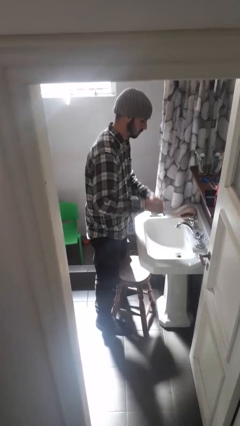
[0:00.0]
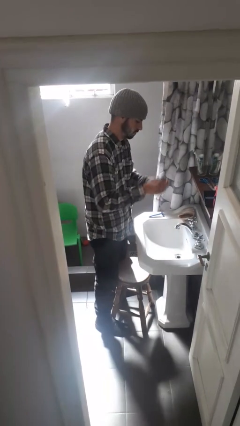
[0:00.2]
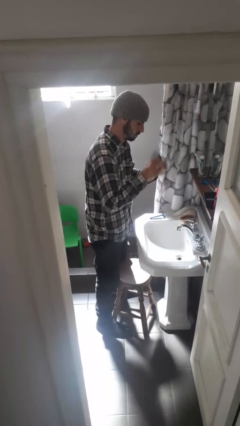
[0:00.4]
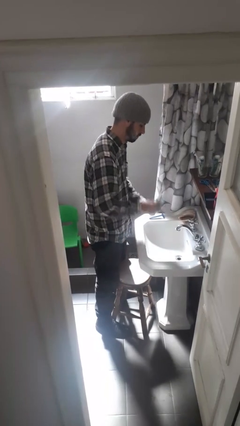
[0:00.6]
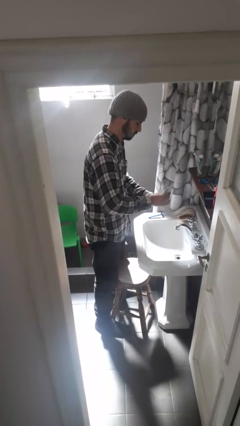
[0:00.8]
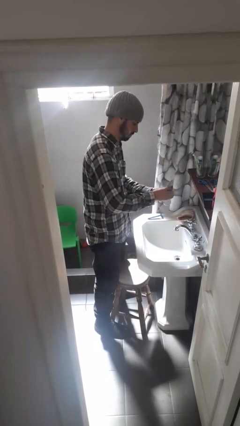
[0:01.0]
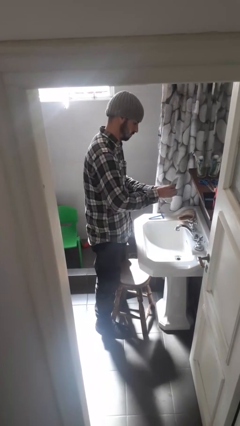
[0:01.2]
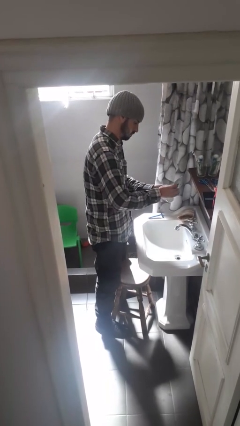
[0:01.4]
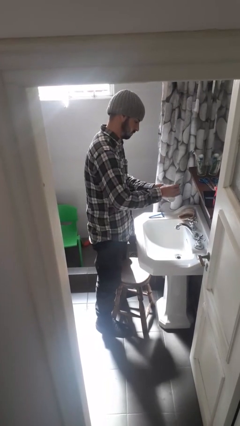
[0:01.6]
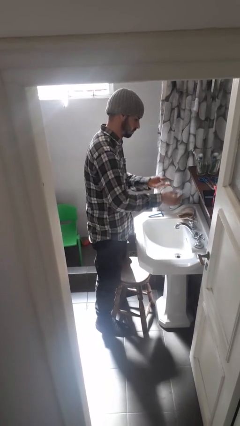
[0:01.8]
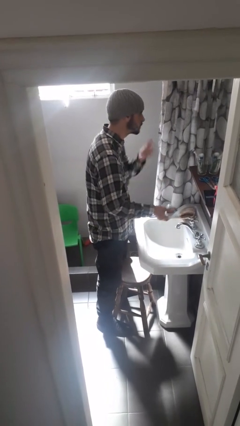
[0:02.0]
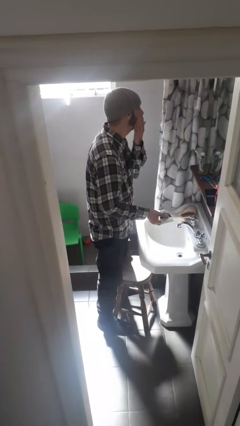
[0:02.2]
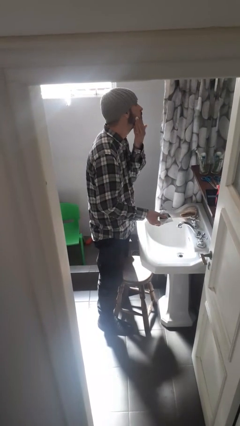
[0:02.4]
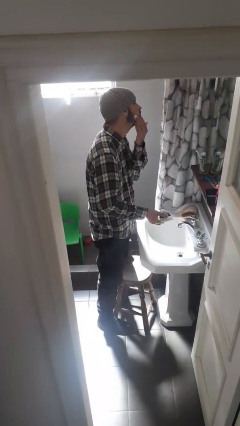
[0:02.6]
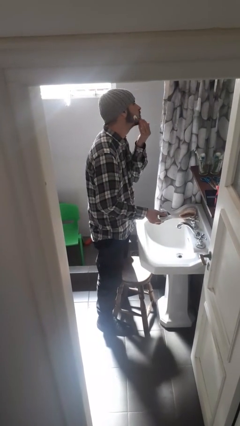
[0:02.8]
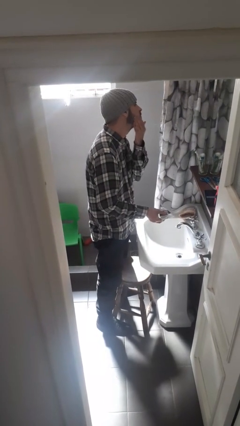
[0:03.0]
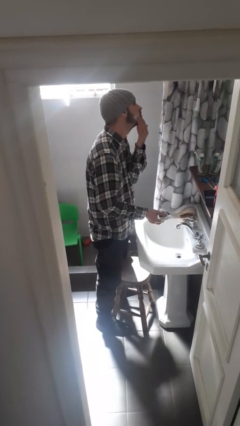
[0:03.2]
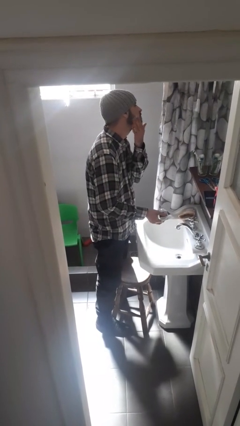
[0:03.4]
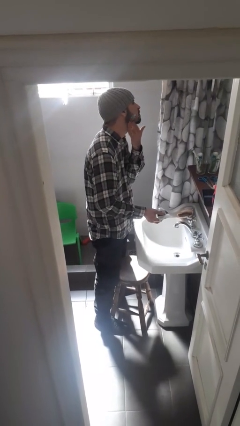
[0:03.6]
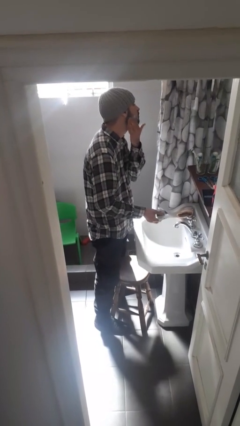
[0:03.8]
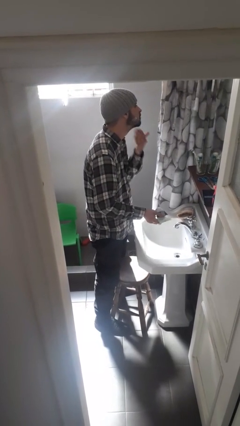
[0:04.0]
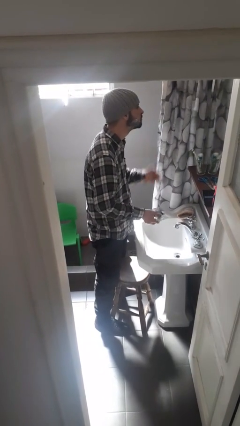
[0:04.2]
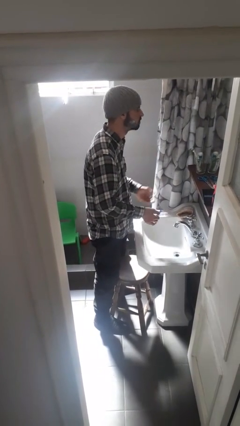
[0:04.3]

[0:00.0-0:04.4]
person applies shaving cream

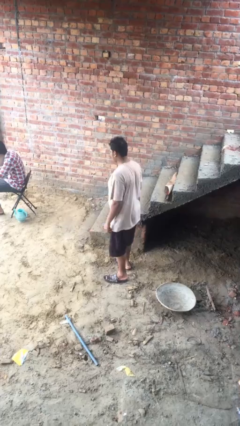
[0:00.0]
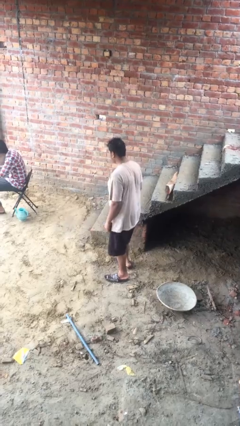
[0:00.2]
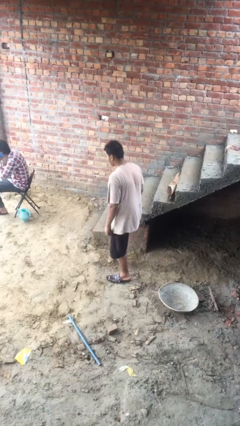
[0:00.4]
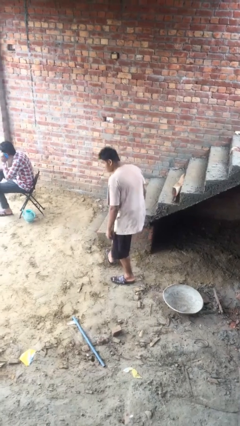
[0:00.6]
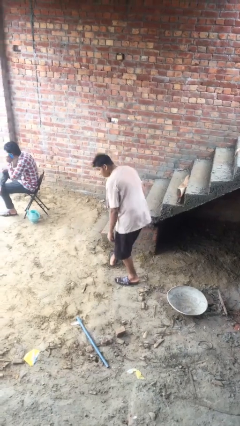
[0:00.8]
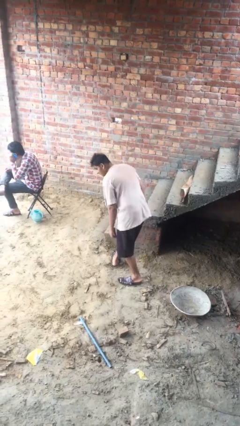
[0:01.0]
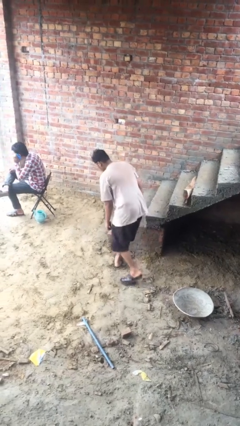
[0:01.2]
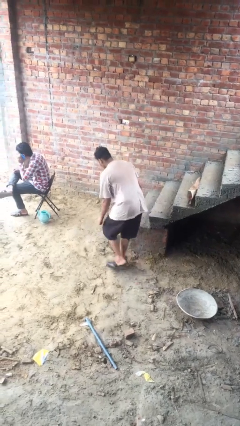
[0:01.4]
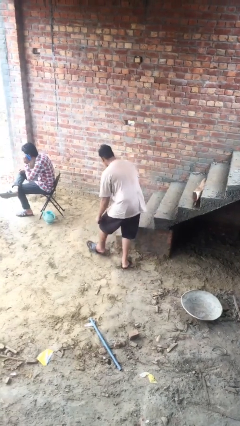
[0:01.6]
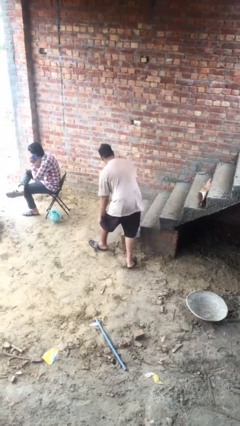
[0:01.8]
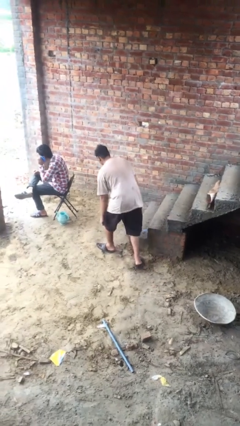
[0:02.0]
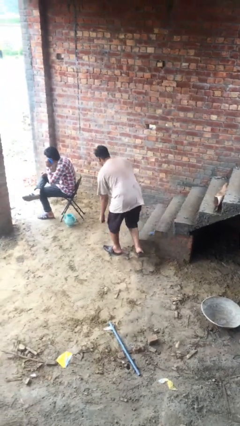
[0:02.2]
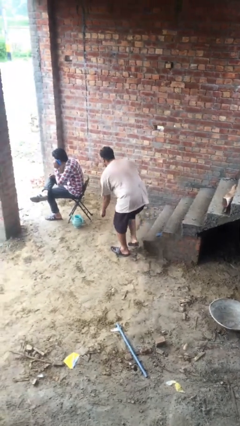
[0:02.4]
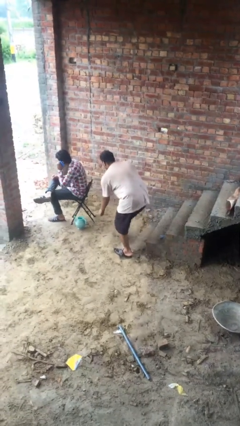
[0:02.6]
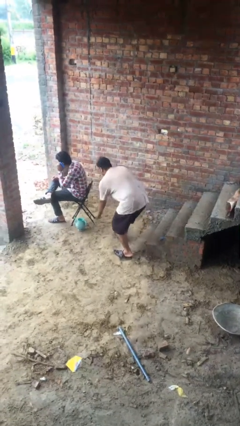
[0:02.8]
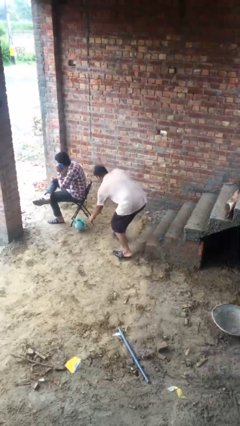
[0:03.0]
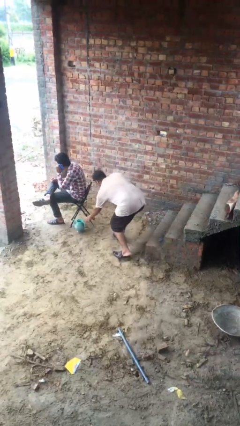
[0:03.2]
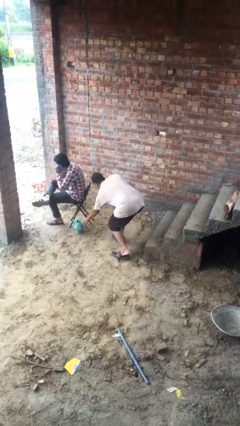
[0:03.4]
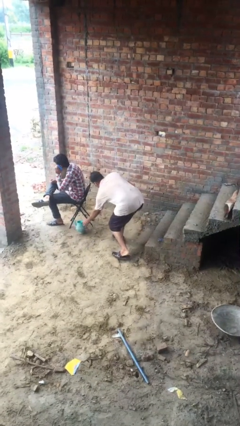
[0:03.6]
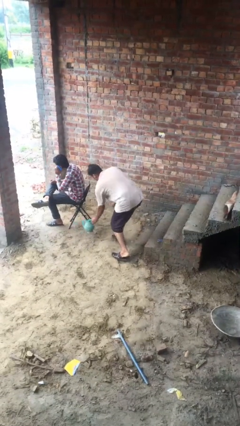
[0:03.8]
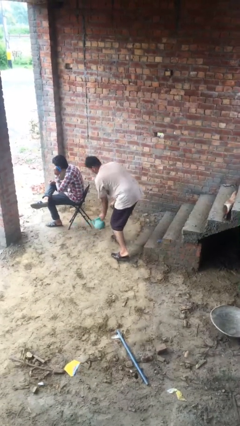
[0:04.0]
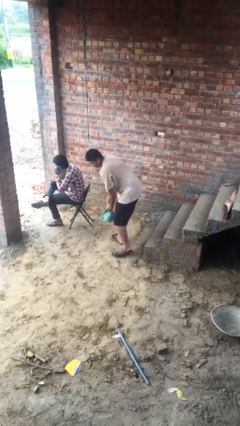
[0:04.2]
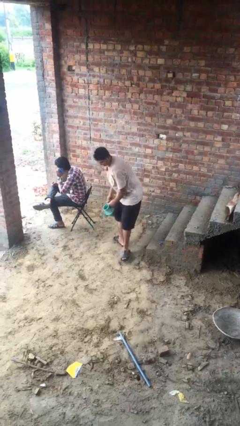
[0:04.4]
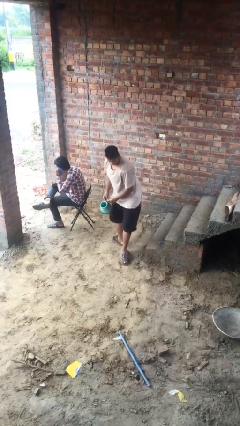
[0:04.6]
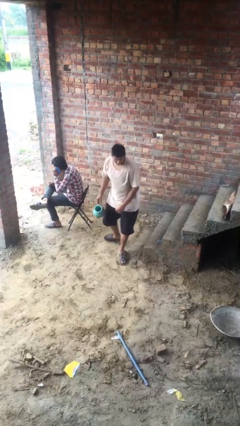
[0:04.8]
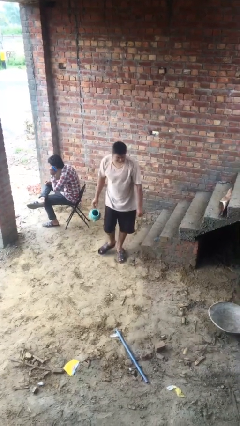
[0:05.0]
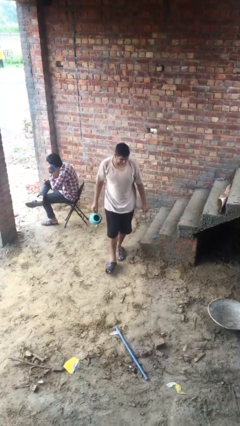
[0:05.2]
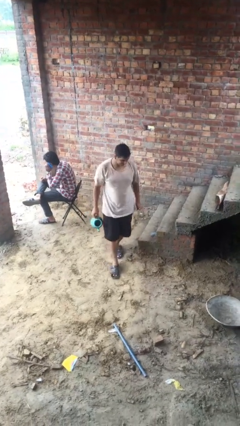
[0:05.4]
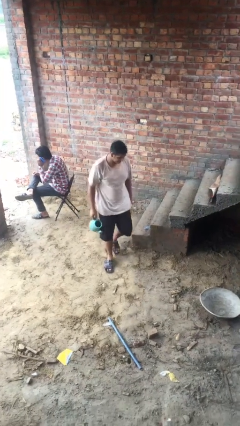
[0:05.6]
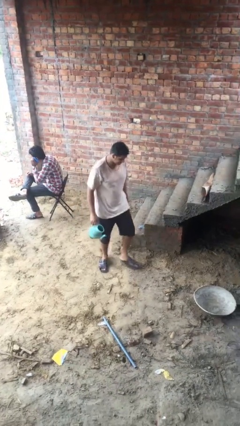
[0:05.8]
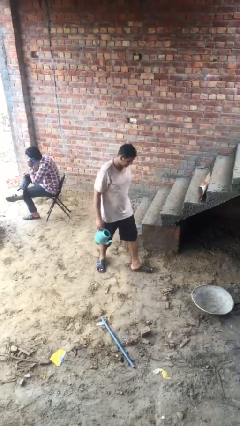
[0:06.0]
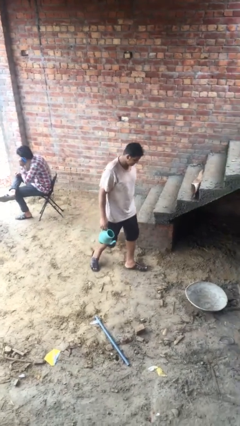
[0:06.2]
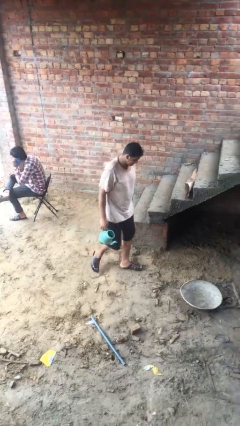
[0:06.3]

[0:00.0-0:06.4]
person steals object from person

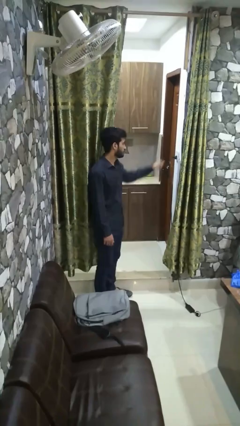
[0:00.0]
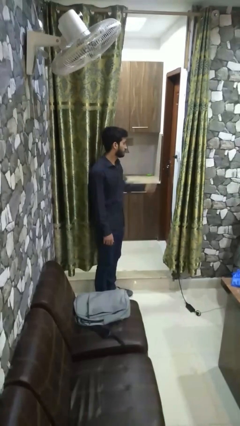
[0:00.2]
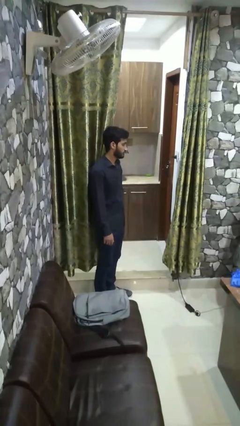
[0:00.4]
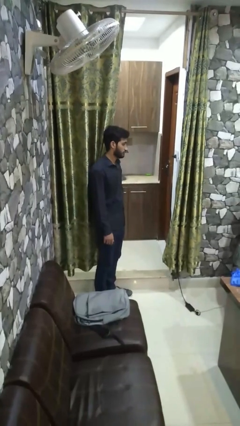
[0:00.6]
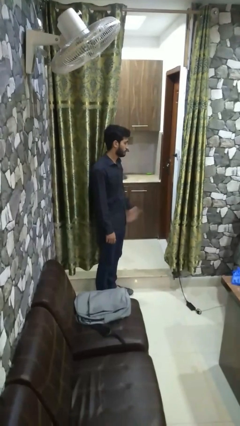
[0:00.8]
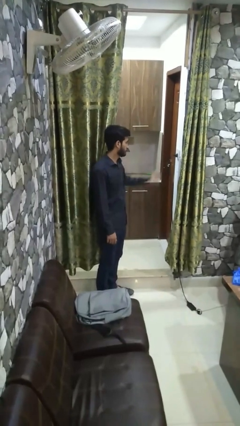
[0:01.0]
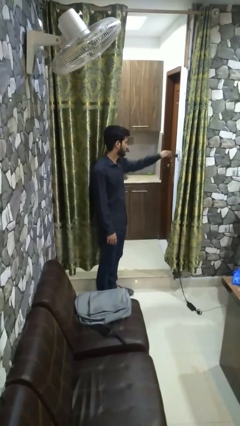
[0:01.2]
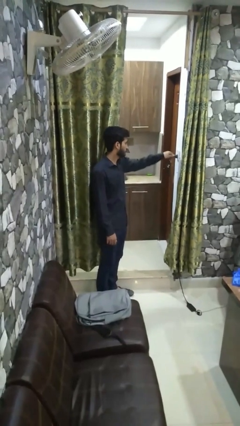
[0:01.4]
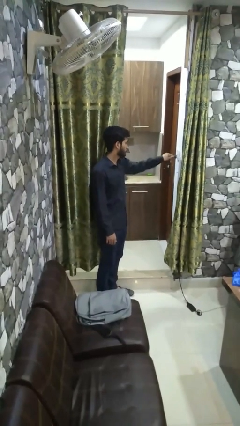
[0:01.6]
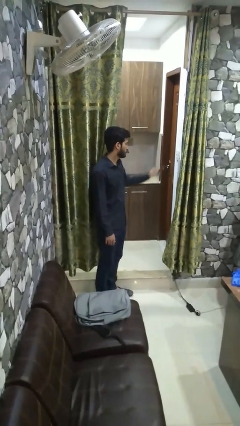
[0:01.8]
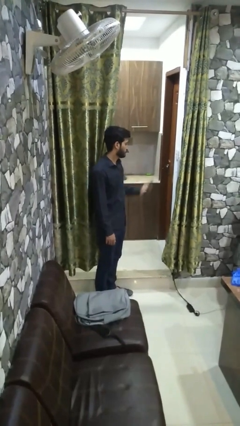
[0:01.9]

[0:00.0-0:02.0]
person unplugs from electrical socket

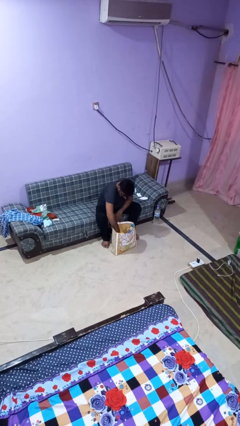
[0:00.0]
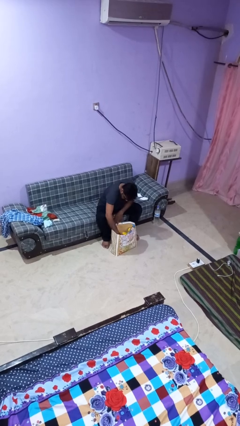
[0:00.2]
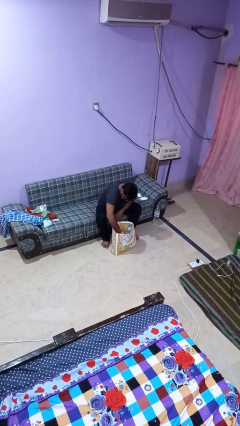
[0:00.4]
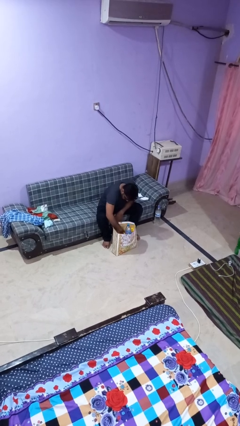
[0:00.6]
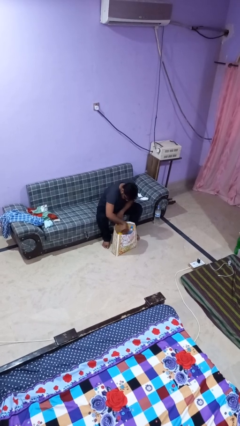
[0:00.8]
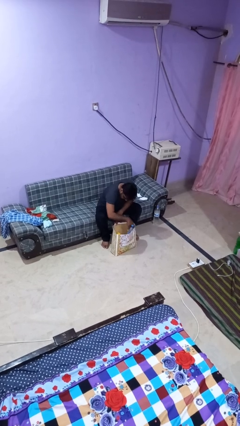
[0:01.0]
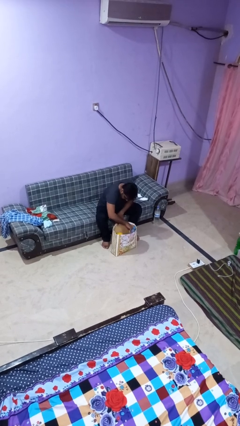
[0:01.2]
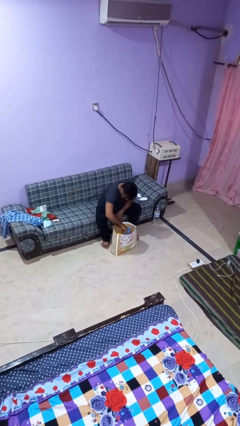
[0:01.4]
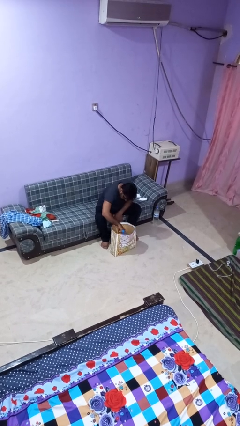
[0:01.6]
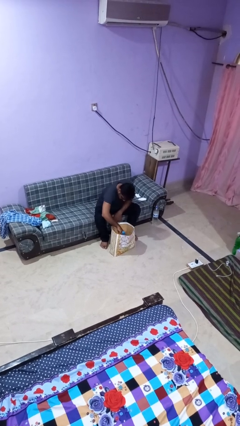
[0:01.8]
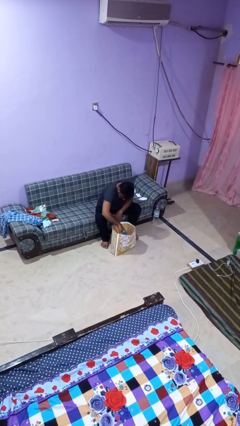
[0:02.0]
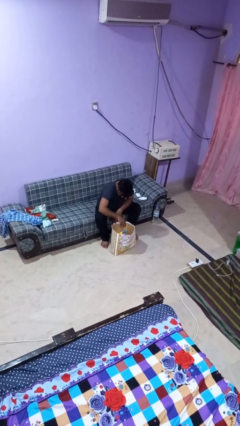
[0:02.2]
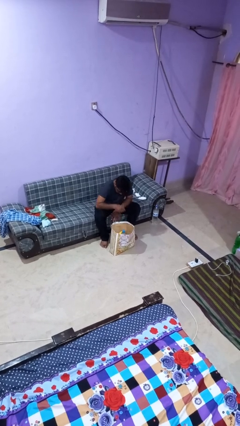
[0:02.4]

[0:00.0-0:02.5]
person searches in bag

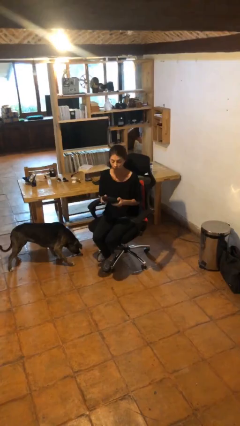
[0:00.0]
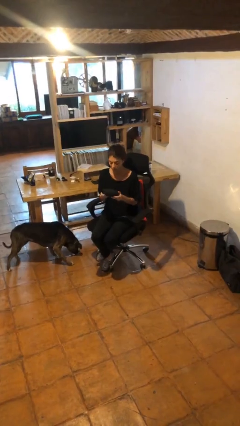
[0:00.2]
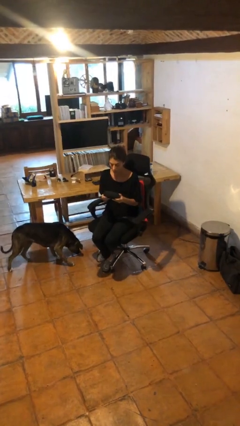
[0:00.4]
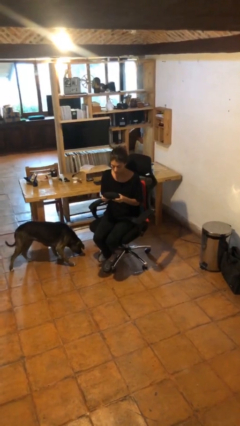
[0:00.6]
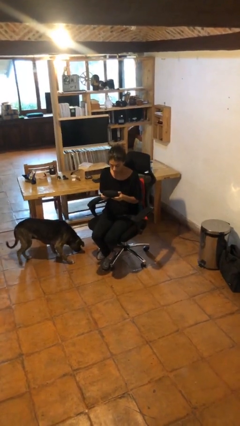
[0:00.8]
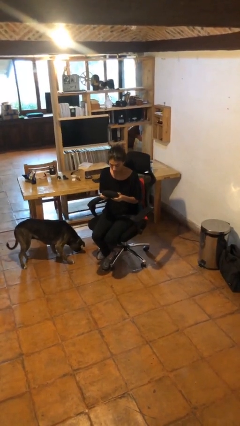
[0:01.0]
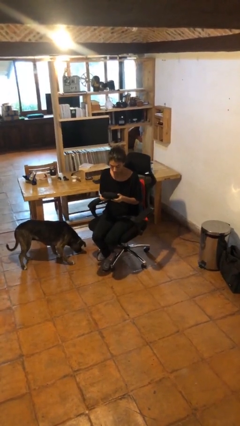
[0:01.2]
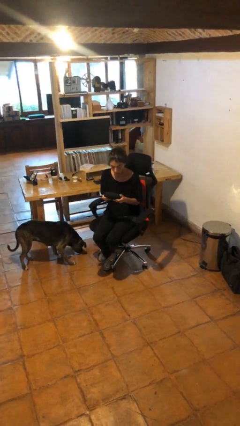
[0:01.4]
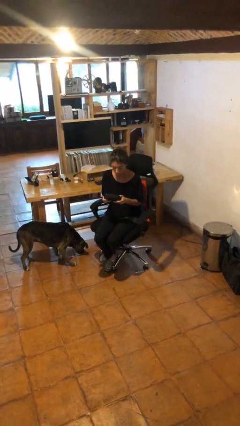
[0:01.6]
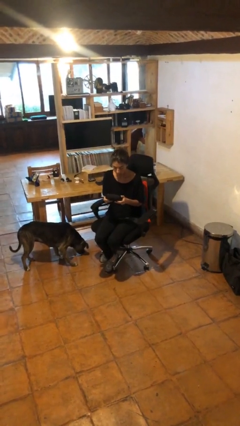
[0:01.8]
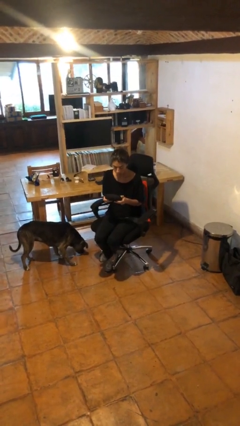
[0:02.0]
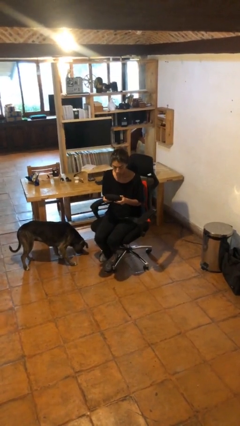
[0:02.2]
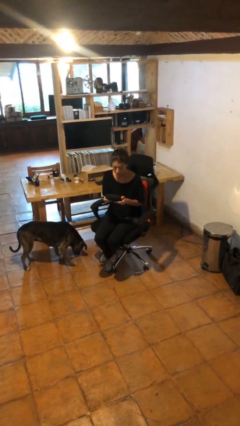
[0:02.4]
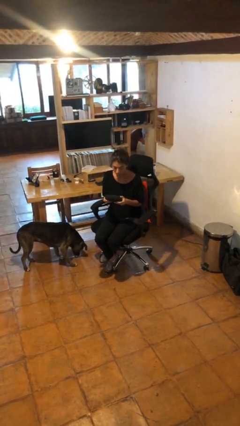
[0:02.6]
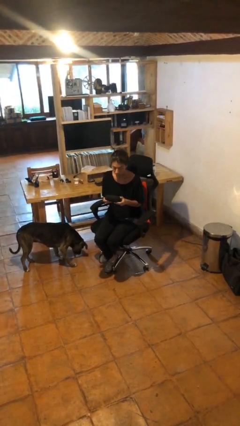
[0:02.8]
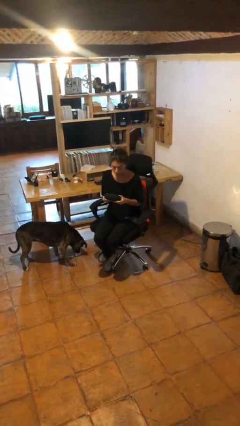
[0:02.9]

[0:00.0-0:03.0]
person interacts with handheld game
